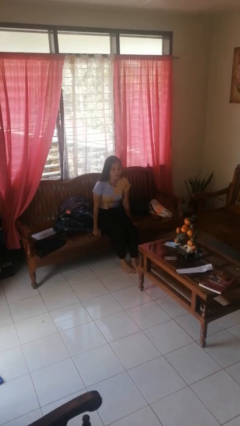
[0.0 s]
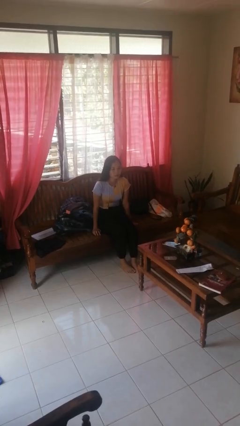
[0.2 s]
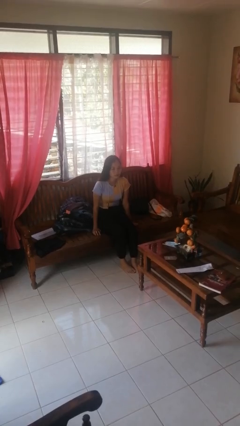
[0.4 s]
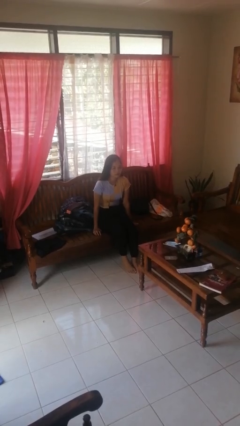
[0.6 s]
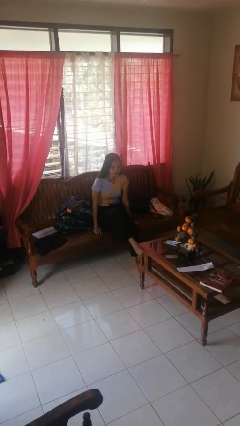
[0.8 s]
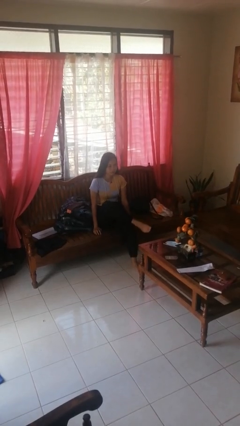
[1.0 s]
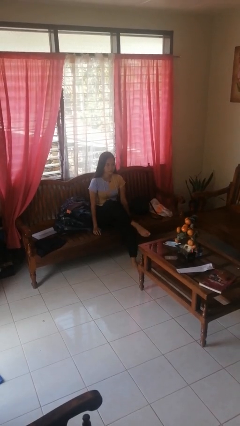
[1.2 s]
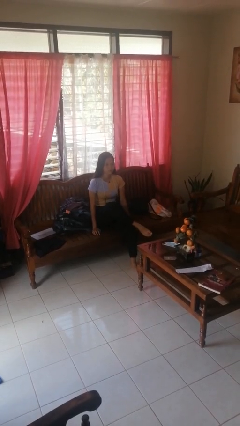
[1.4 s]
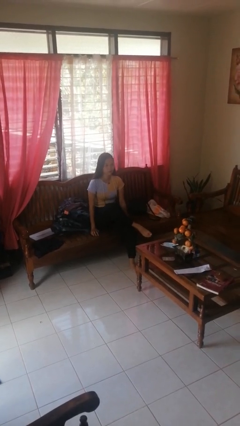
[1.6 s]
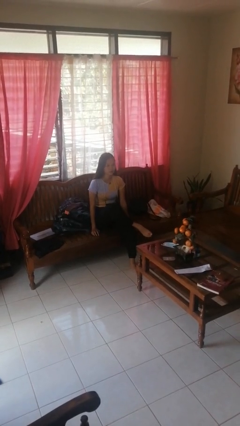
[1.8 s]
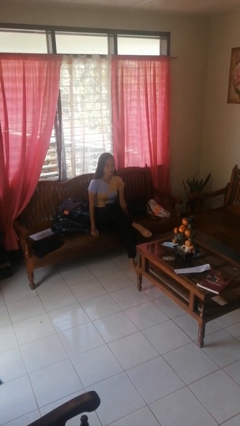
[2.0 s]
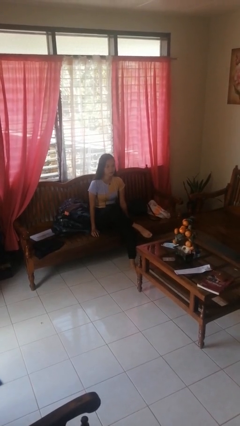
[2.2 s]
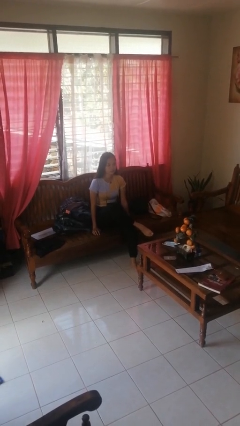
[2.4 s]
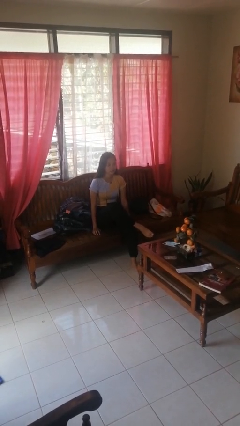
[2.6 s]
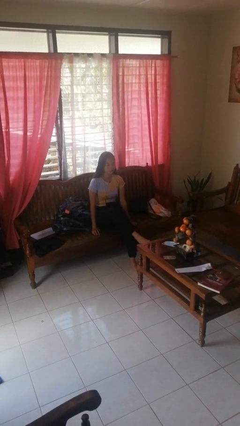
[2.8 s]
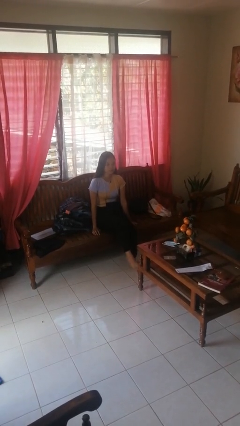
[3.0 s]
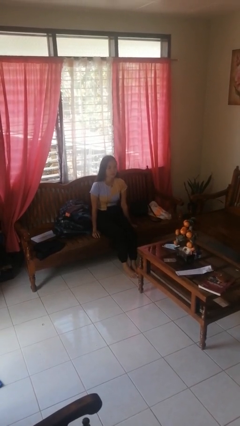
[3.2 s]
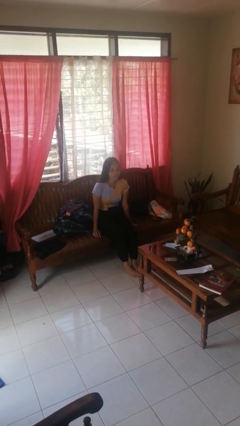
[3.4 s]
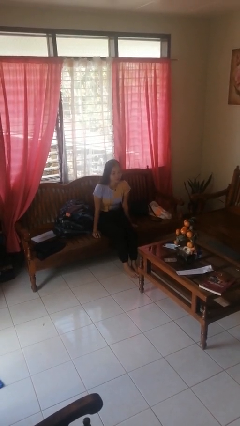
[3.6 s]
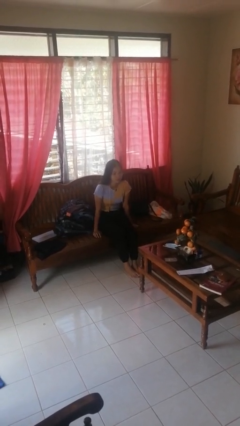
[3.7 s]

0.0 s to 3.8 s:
person crosses legs

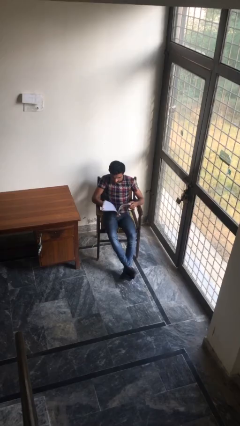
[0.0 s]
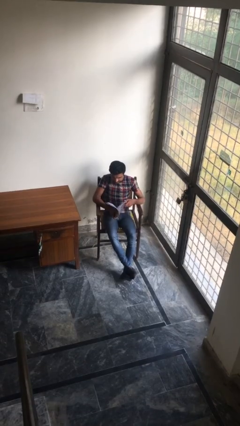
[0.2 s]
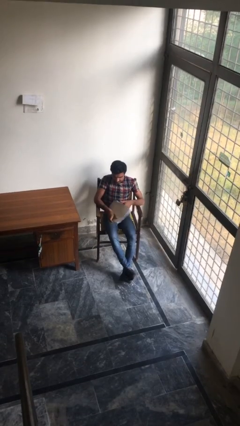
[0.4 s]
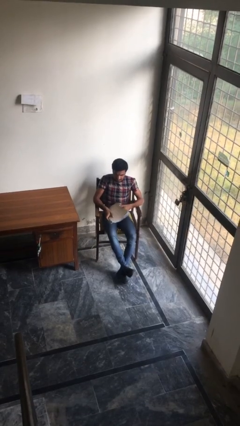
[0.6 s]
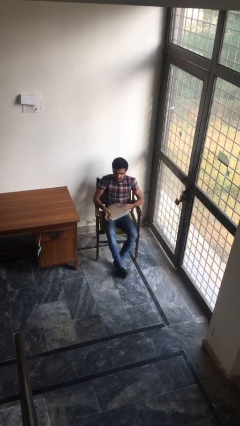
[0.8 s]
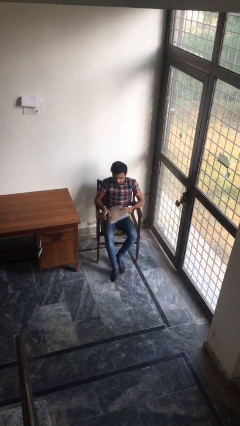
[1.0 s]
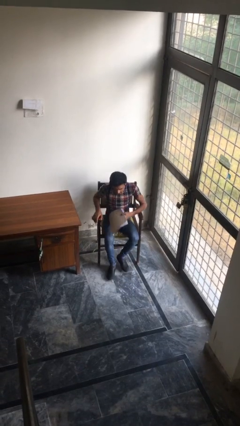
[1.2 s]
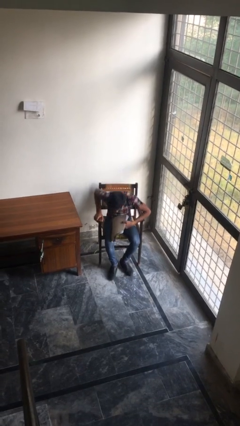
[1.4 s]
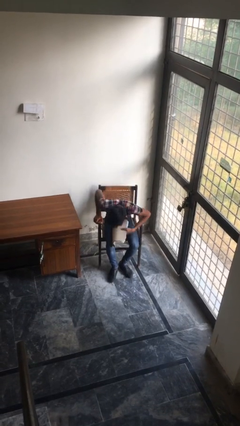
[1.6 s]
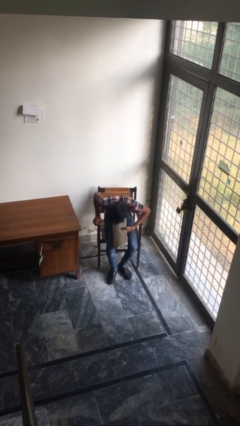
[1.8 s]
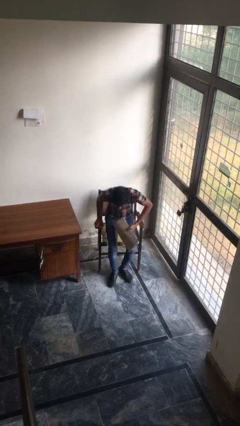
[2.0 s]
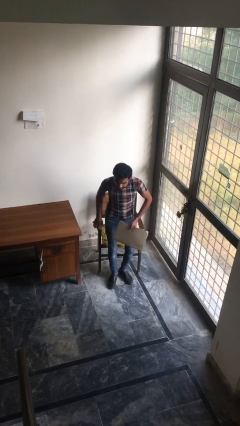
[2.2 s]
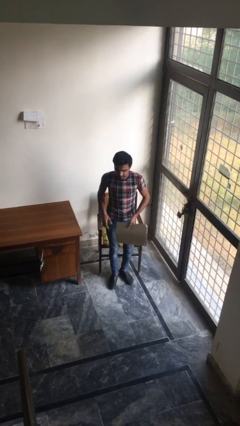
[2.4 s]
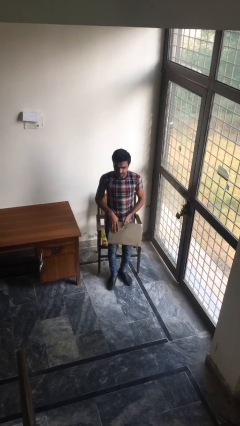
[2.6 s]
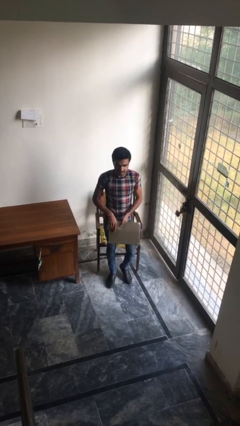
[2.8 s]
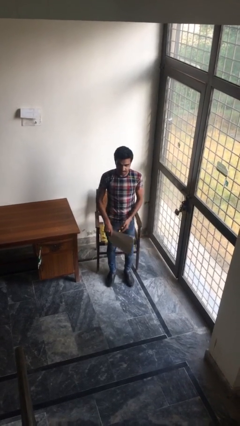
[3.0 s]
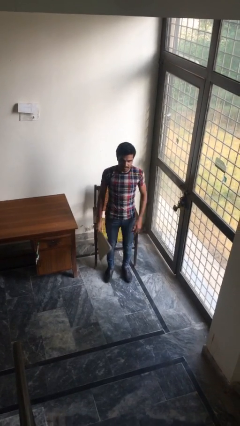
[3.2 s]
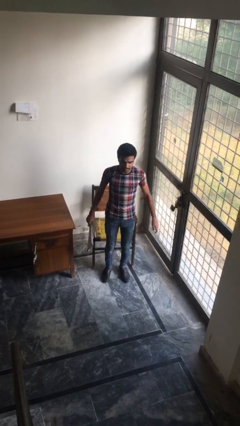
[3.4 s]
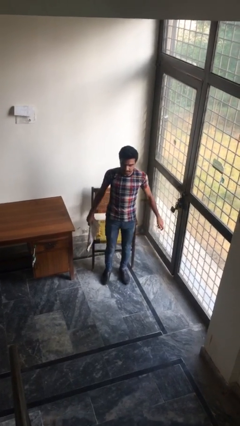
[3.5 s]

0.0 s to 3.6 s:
person stands up

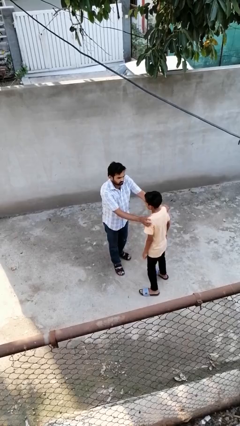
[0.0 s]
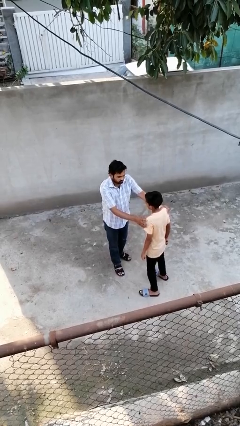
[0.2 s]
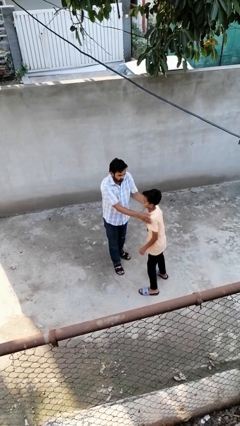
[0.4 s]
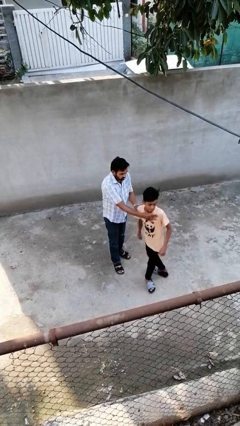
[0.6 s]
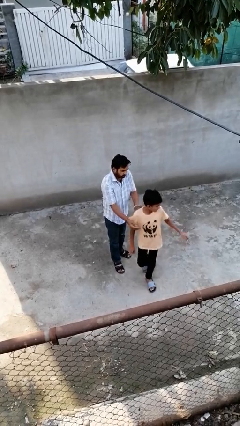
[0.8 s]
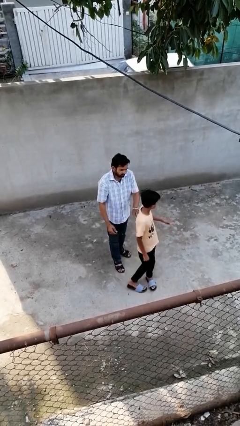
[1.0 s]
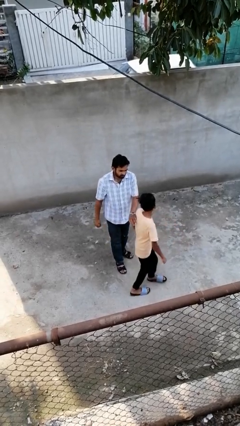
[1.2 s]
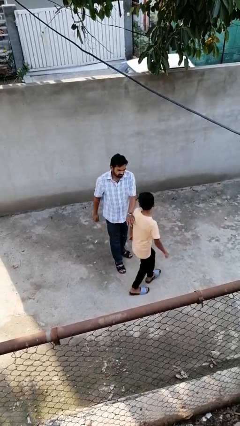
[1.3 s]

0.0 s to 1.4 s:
person spins person around

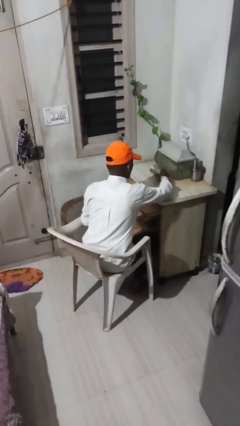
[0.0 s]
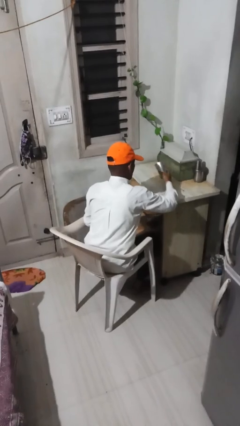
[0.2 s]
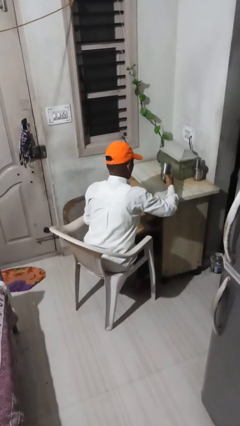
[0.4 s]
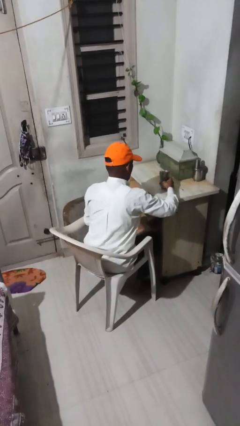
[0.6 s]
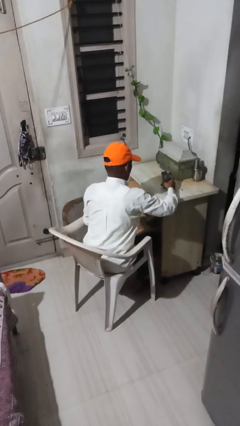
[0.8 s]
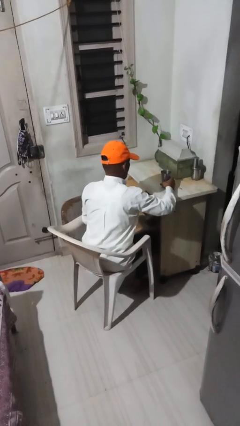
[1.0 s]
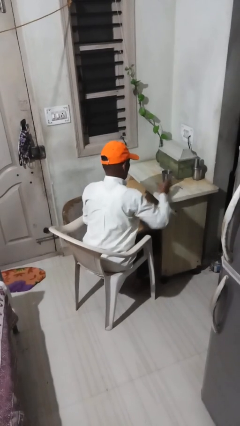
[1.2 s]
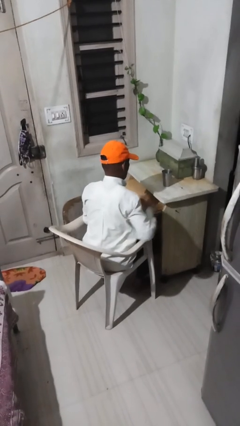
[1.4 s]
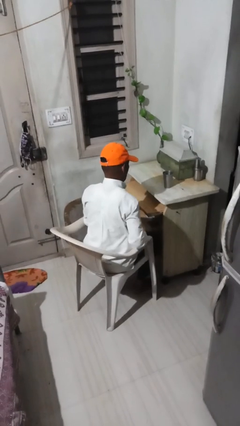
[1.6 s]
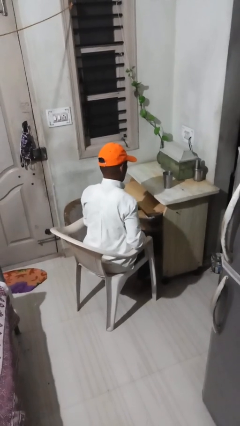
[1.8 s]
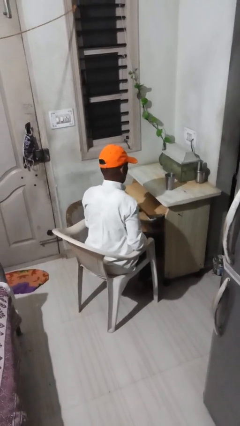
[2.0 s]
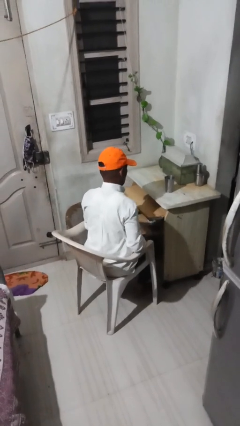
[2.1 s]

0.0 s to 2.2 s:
person sets upright glass

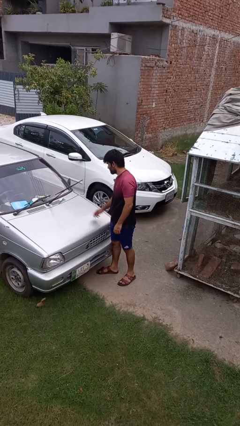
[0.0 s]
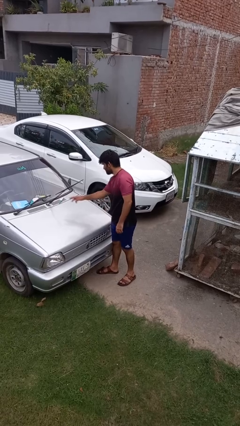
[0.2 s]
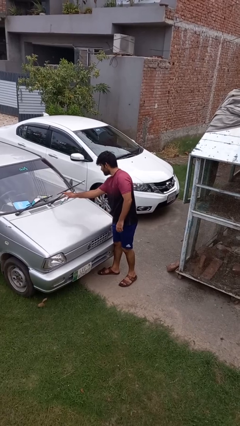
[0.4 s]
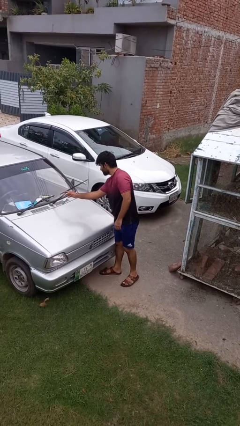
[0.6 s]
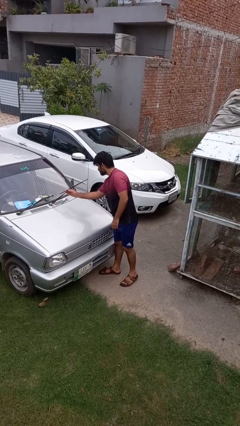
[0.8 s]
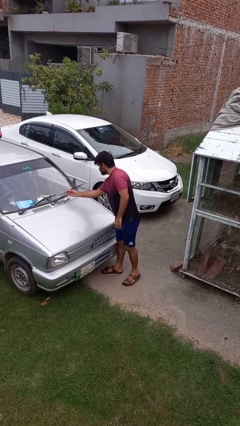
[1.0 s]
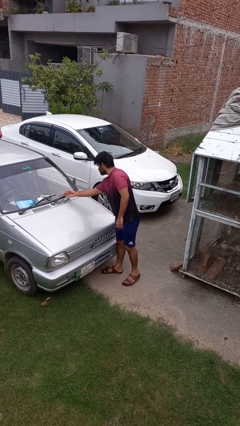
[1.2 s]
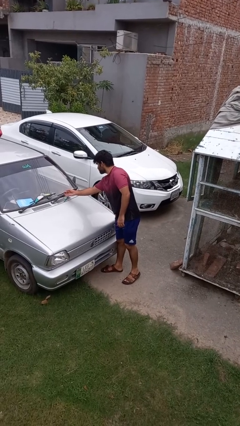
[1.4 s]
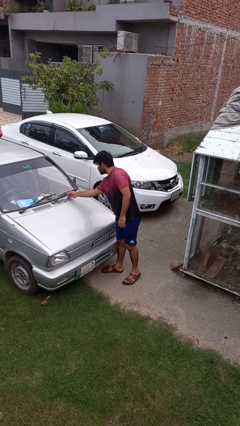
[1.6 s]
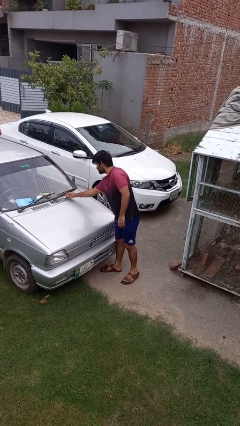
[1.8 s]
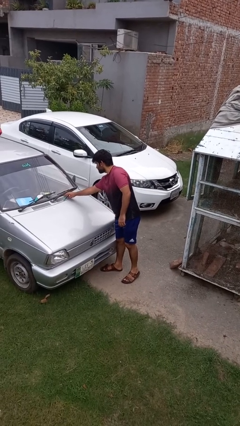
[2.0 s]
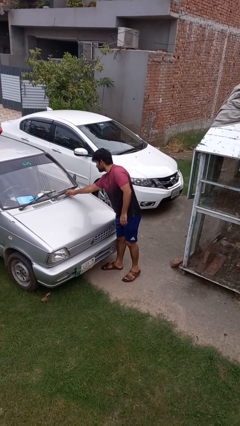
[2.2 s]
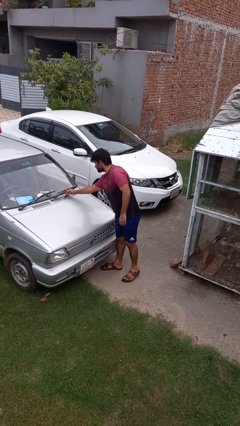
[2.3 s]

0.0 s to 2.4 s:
person flips down car wipers

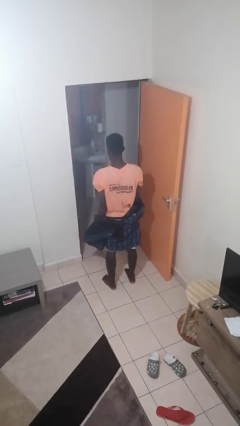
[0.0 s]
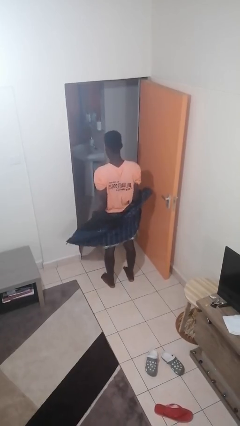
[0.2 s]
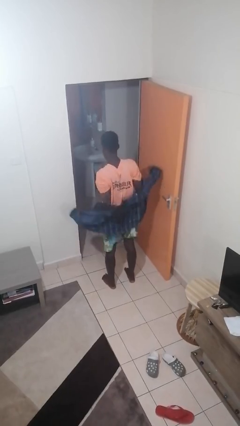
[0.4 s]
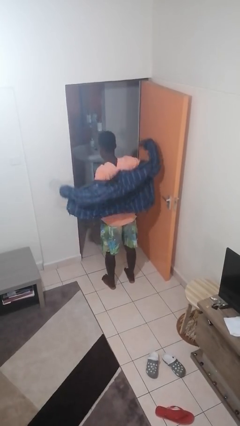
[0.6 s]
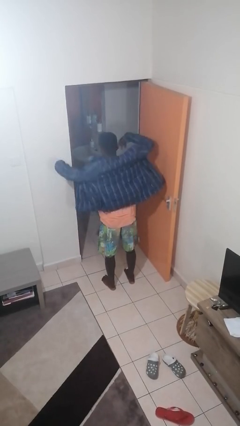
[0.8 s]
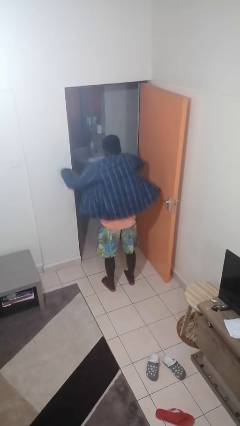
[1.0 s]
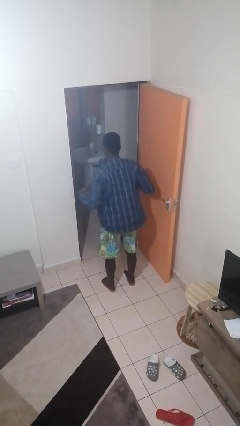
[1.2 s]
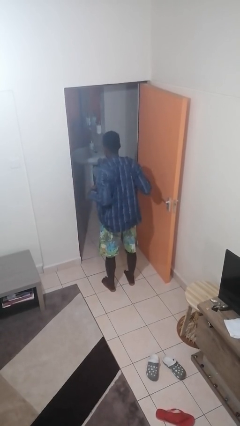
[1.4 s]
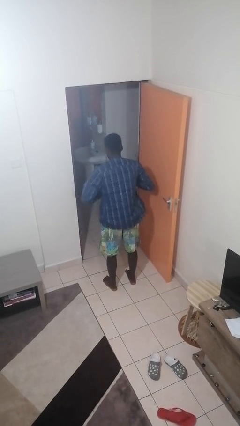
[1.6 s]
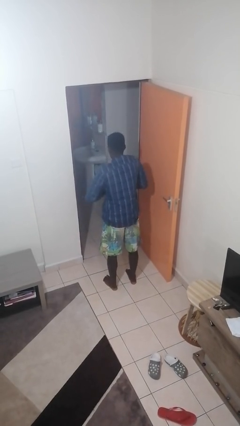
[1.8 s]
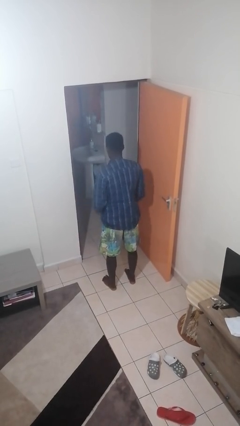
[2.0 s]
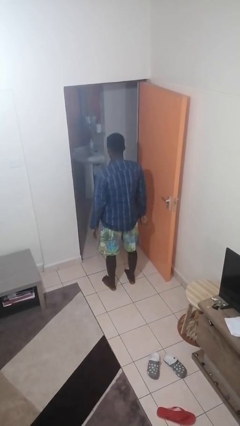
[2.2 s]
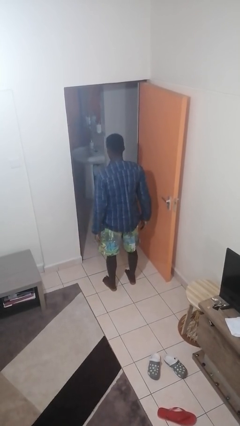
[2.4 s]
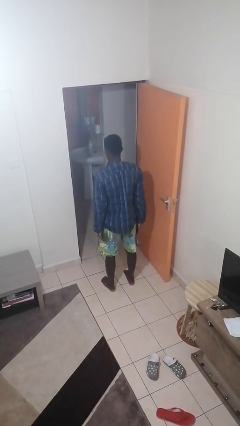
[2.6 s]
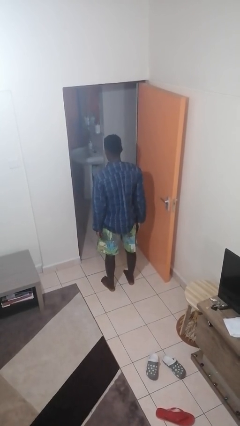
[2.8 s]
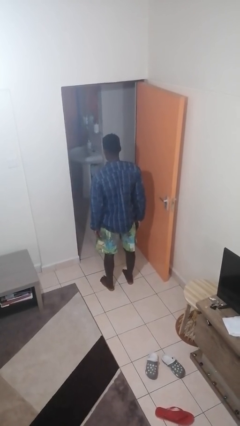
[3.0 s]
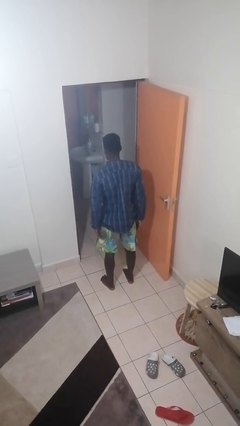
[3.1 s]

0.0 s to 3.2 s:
person puts on jacket

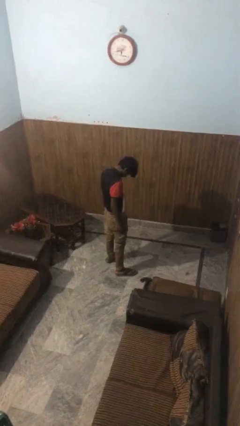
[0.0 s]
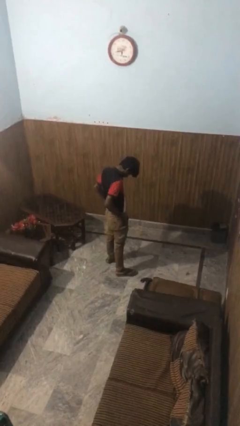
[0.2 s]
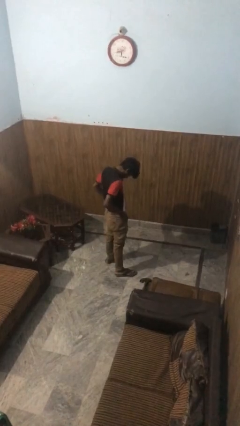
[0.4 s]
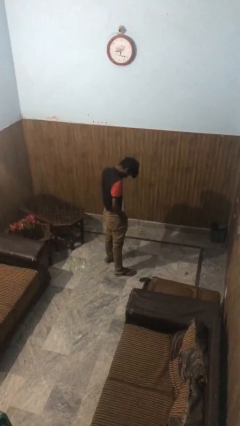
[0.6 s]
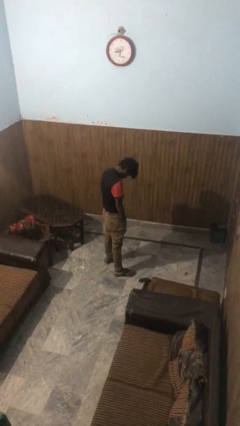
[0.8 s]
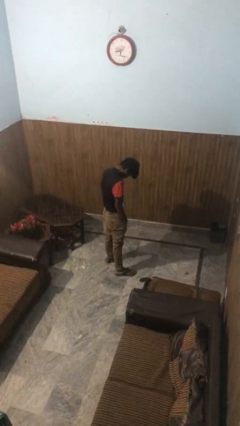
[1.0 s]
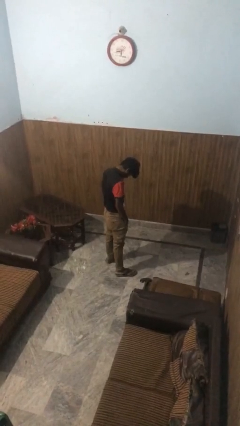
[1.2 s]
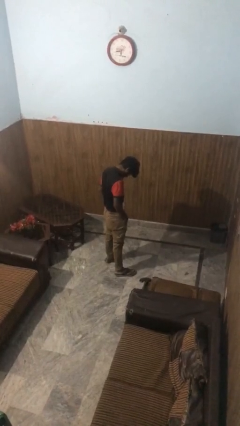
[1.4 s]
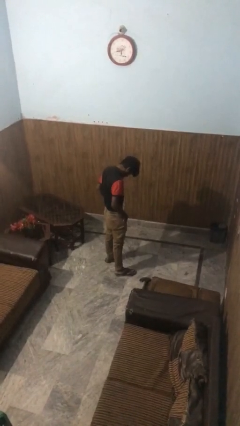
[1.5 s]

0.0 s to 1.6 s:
person puts hands in back pockets
